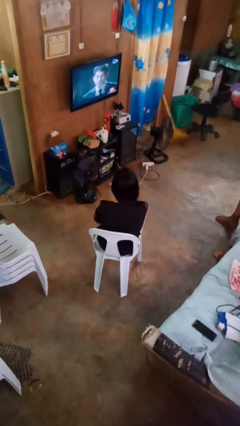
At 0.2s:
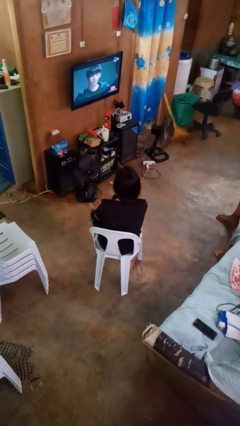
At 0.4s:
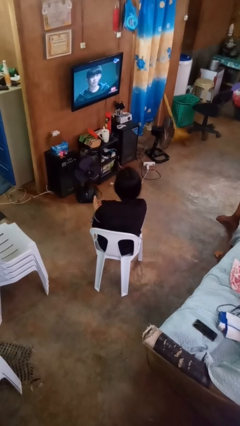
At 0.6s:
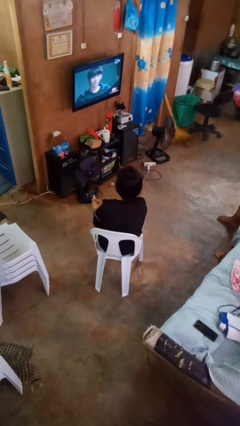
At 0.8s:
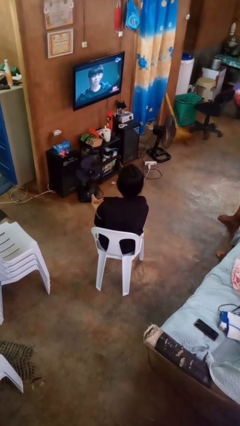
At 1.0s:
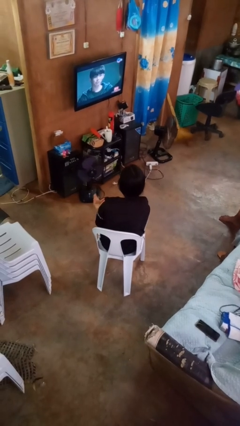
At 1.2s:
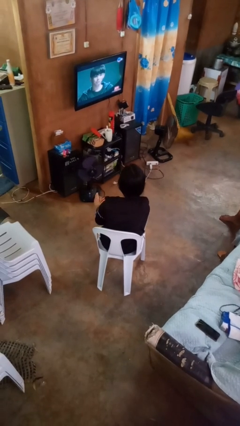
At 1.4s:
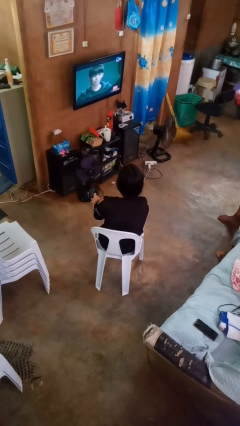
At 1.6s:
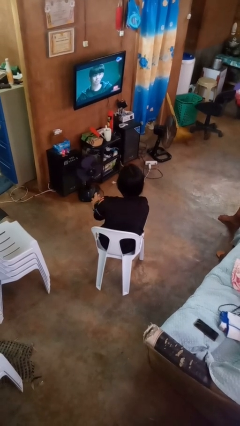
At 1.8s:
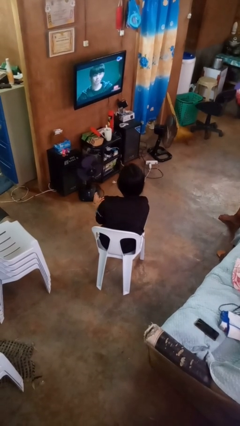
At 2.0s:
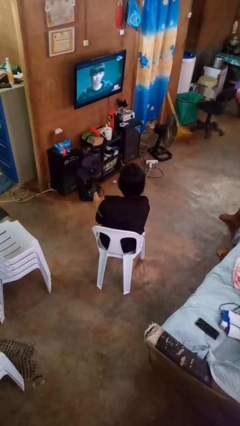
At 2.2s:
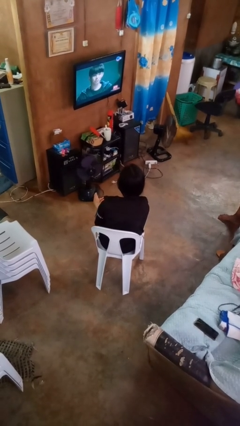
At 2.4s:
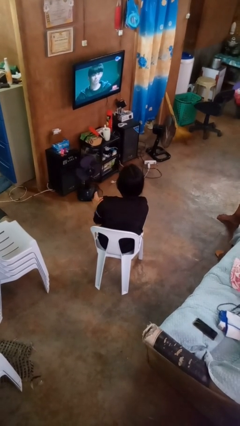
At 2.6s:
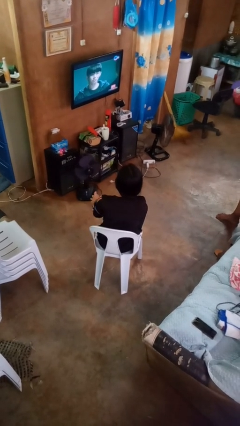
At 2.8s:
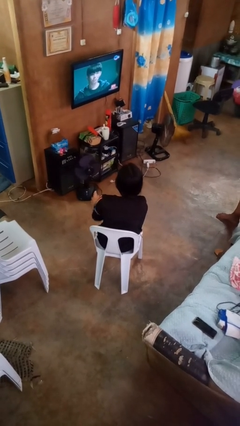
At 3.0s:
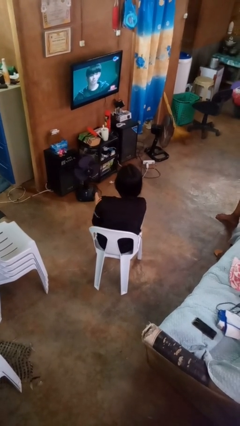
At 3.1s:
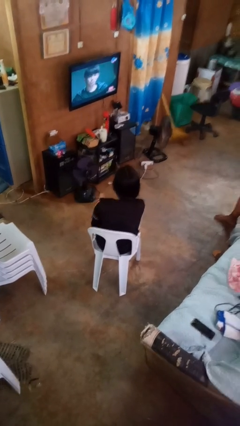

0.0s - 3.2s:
person rubs foot

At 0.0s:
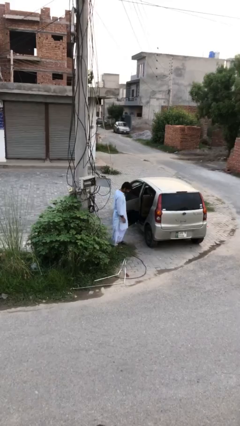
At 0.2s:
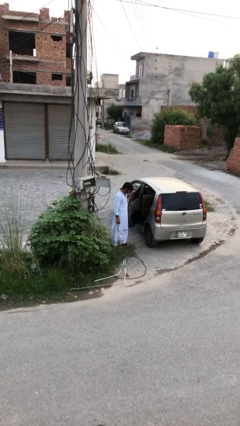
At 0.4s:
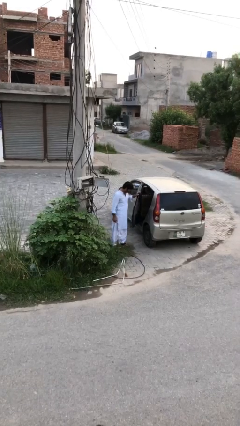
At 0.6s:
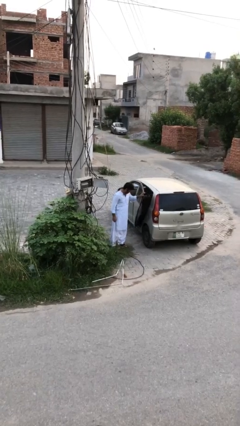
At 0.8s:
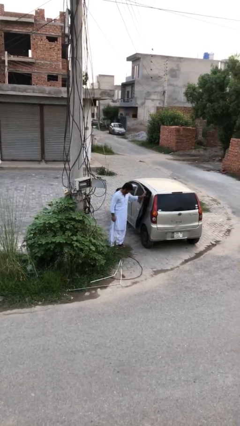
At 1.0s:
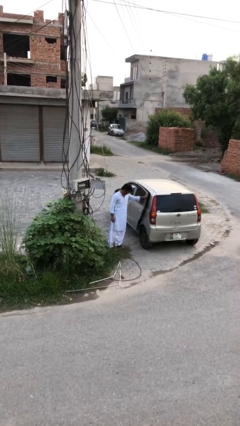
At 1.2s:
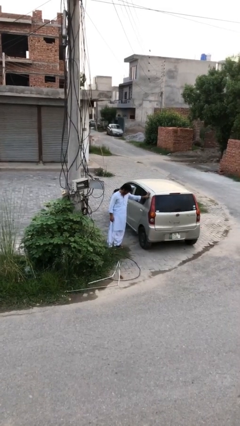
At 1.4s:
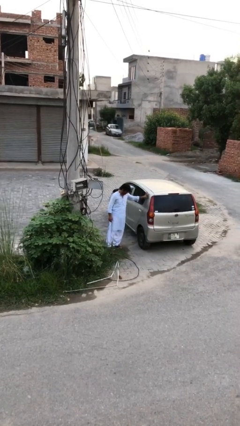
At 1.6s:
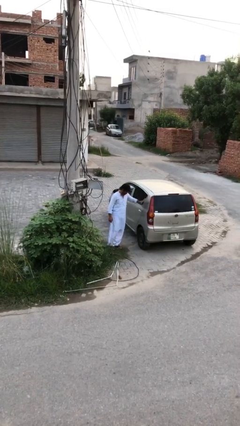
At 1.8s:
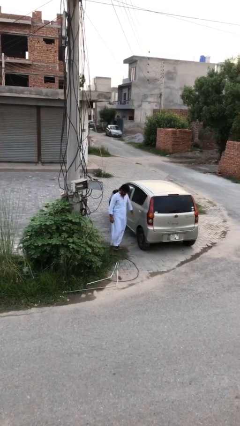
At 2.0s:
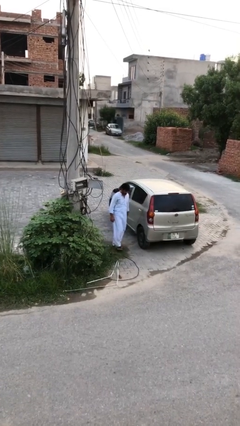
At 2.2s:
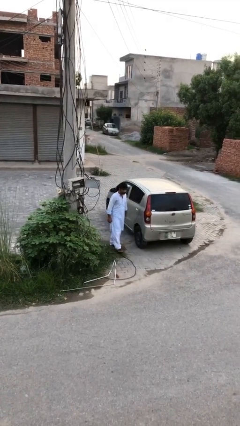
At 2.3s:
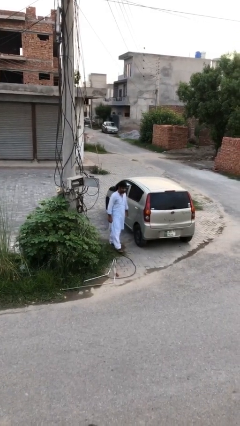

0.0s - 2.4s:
person closes car door

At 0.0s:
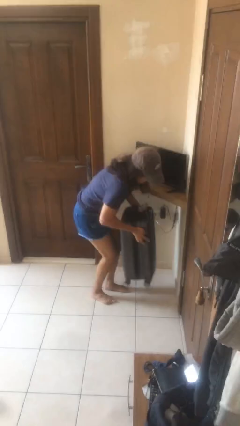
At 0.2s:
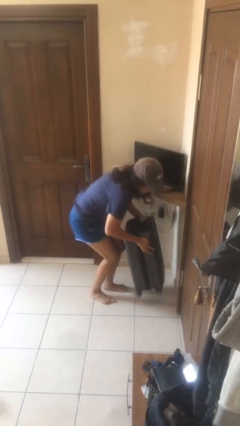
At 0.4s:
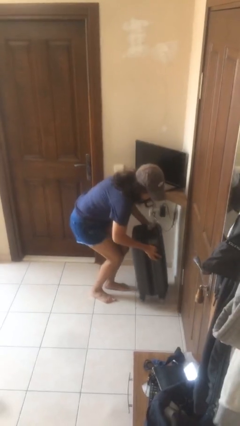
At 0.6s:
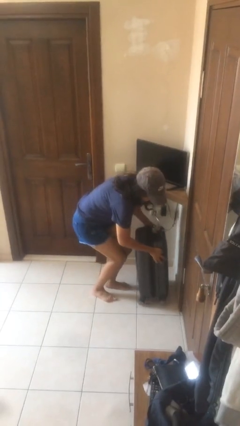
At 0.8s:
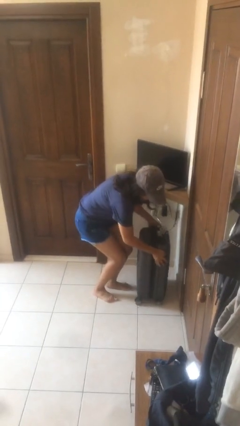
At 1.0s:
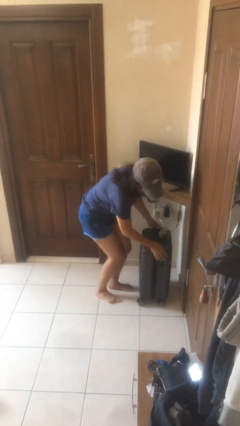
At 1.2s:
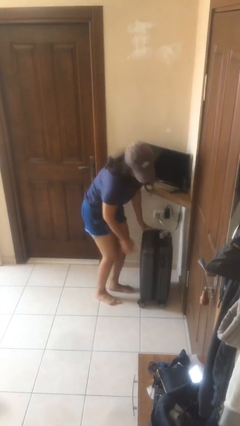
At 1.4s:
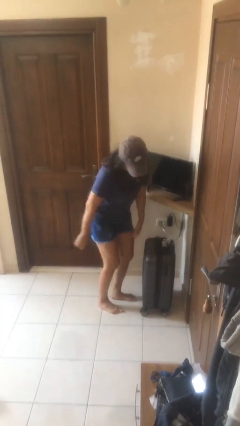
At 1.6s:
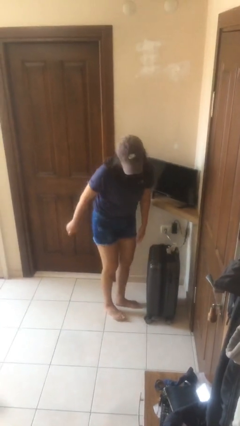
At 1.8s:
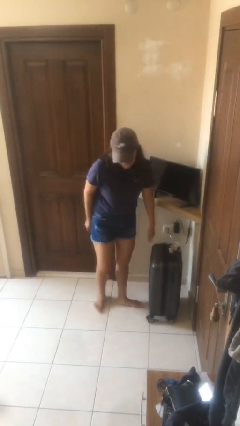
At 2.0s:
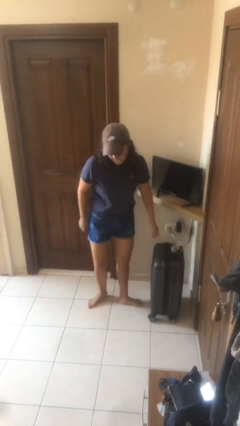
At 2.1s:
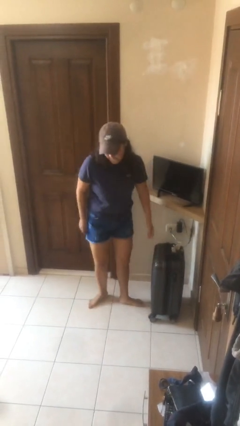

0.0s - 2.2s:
person puts down object on floor

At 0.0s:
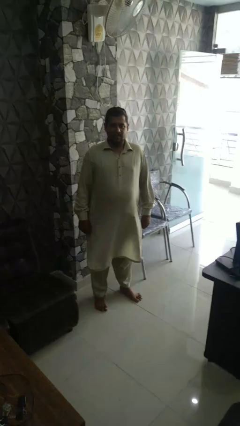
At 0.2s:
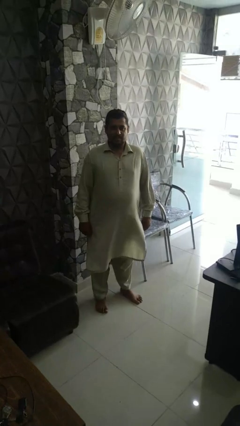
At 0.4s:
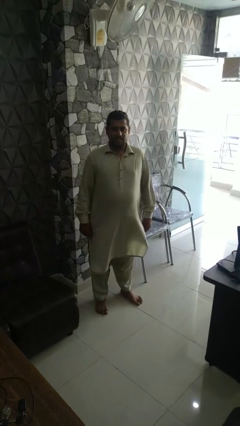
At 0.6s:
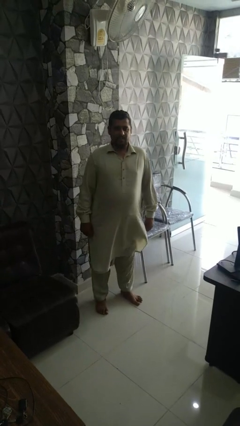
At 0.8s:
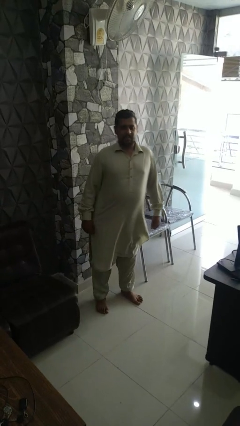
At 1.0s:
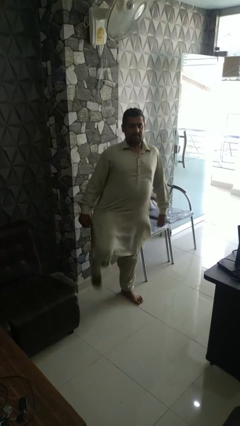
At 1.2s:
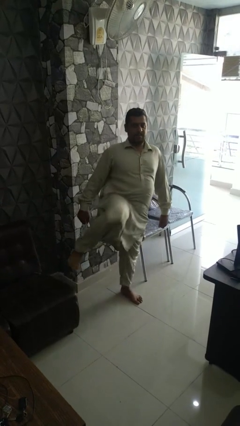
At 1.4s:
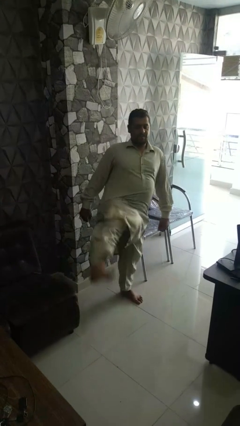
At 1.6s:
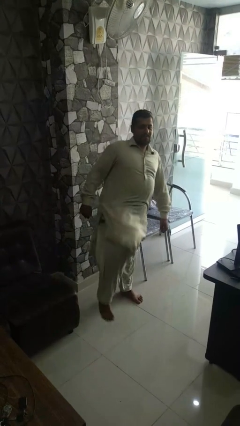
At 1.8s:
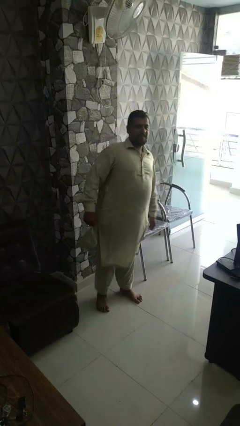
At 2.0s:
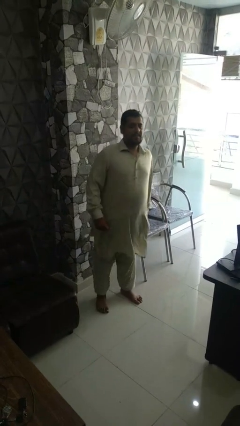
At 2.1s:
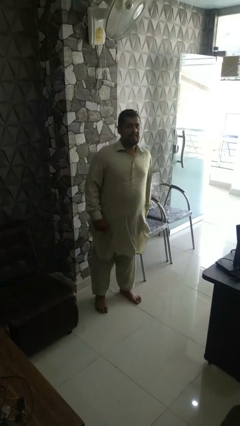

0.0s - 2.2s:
person karate kicks

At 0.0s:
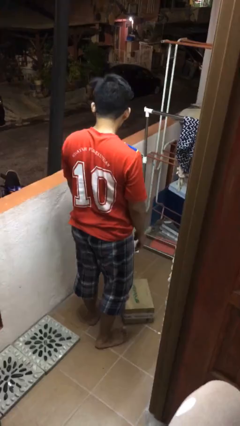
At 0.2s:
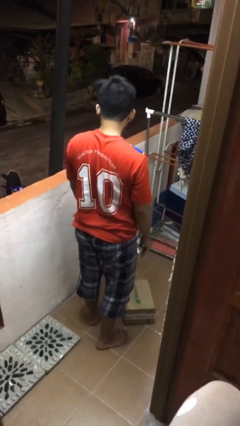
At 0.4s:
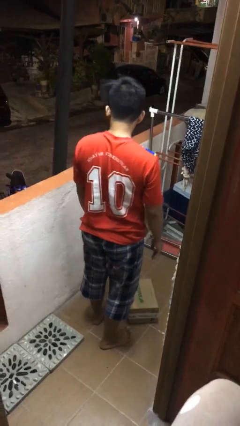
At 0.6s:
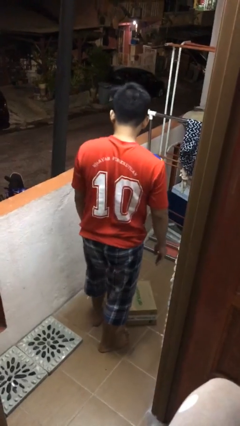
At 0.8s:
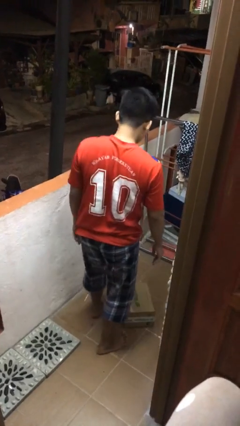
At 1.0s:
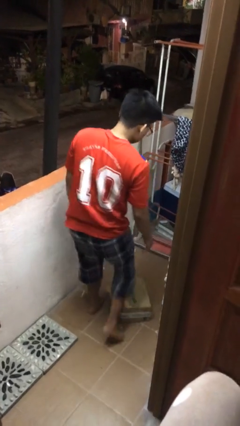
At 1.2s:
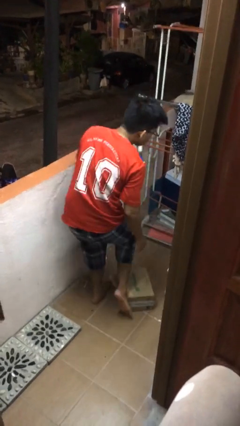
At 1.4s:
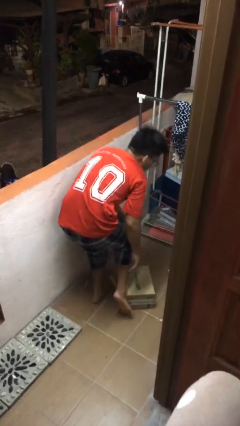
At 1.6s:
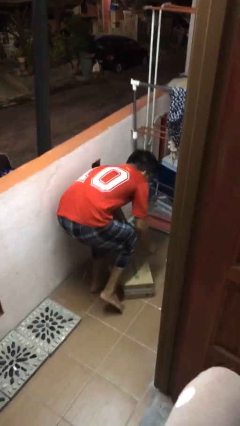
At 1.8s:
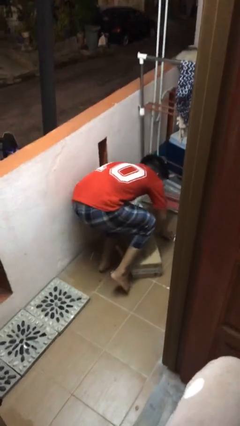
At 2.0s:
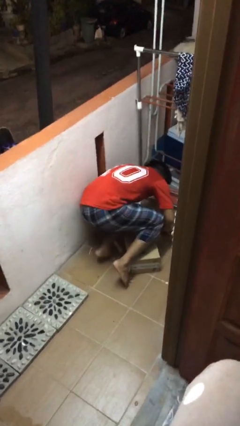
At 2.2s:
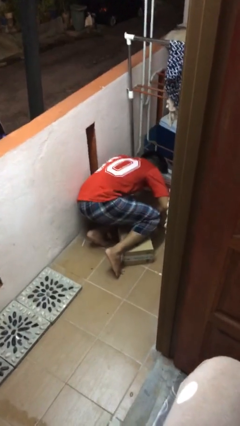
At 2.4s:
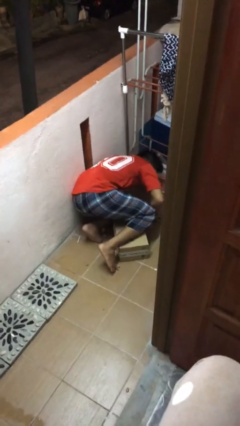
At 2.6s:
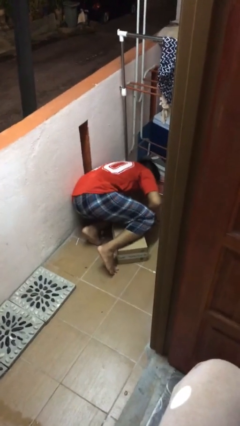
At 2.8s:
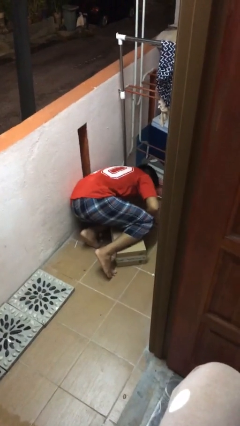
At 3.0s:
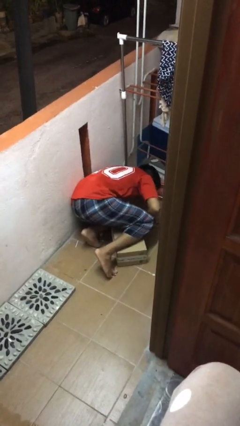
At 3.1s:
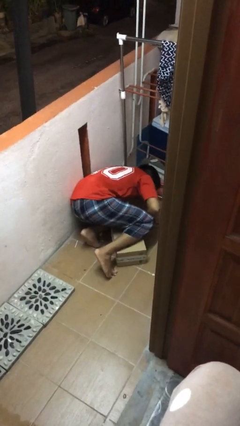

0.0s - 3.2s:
person trips on object on floor

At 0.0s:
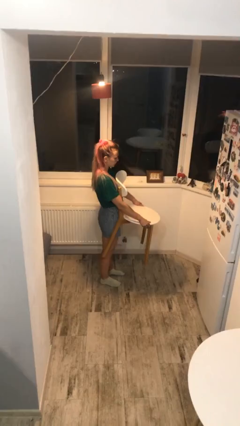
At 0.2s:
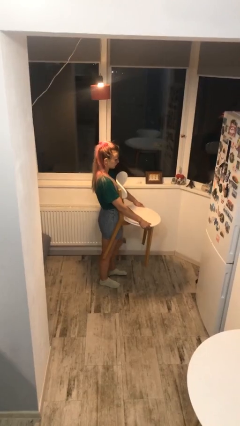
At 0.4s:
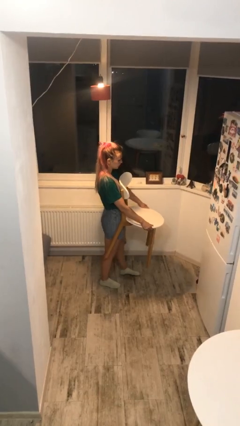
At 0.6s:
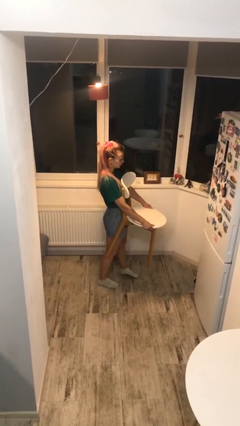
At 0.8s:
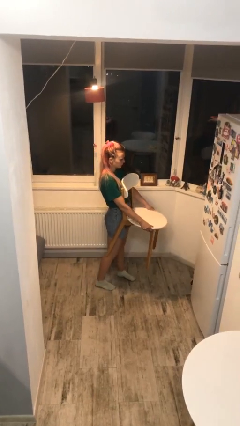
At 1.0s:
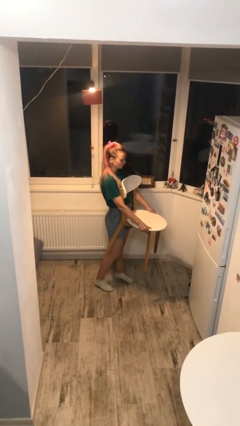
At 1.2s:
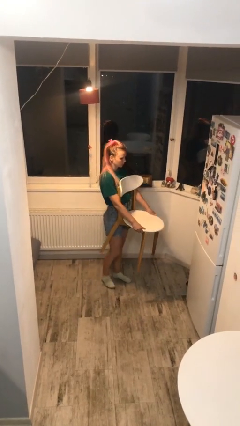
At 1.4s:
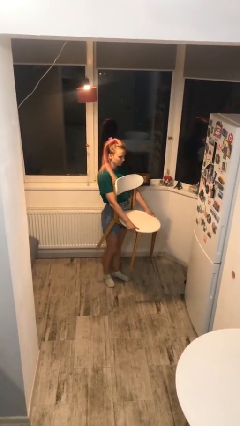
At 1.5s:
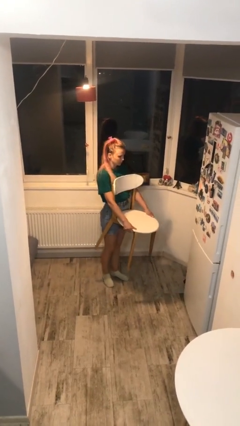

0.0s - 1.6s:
person carries furniture

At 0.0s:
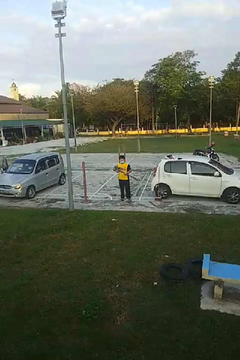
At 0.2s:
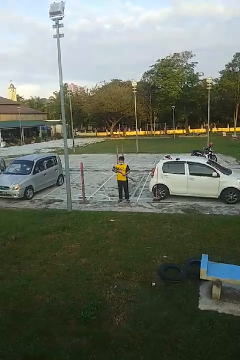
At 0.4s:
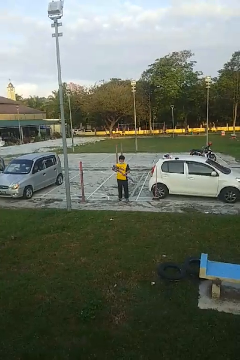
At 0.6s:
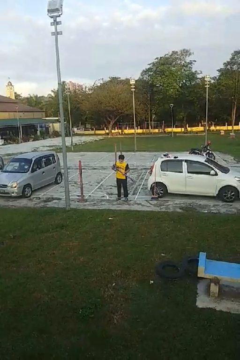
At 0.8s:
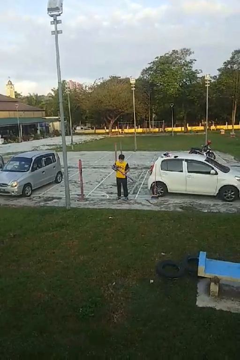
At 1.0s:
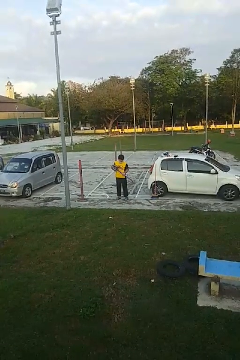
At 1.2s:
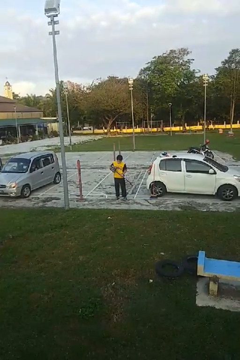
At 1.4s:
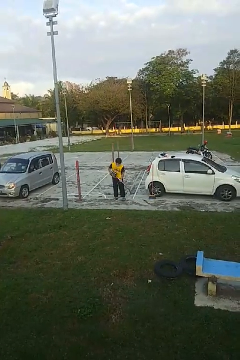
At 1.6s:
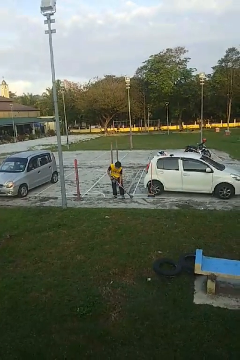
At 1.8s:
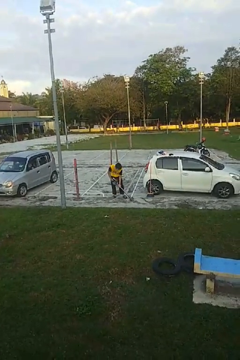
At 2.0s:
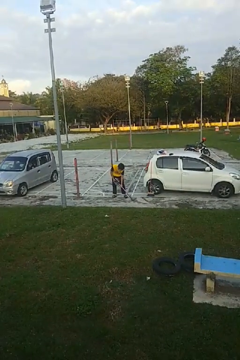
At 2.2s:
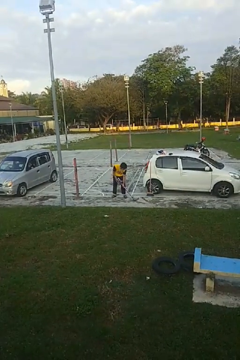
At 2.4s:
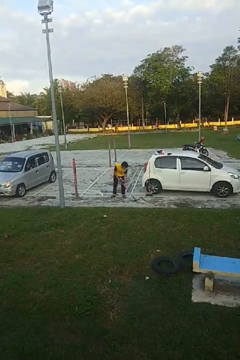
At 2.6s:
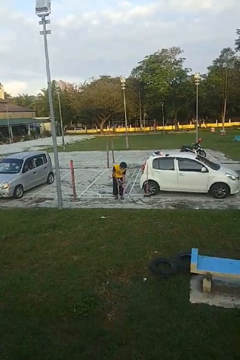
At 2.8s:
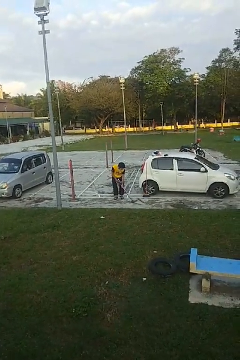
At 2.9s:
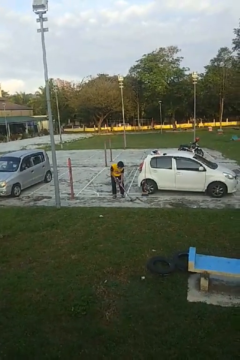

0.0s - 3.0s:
person vacuums carpet

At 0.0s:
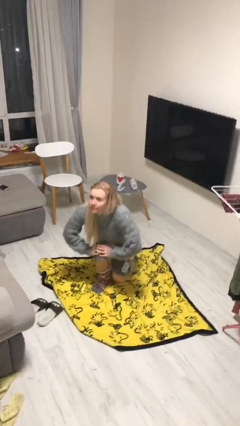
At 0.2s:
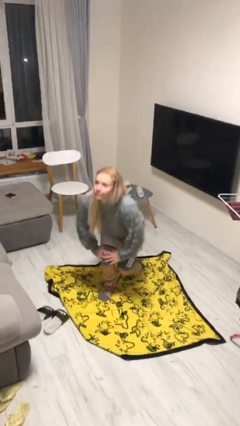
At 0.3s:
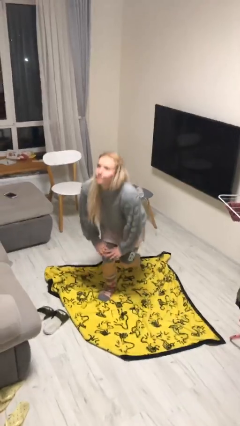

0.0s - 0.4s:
person stands up
